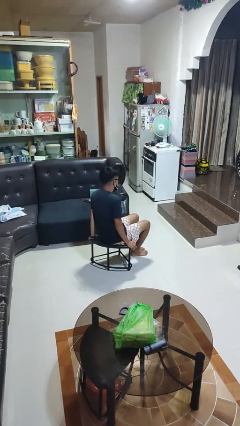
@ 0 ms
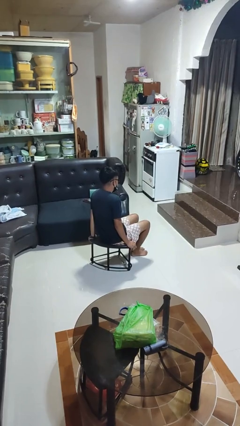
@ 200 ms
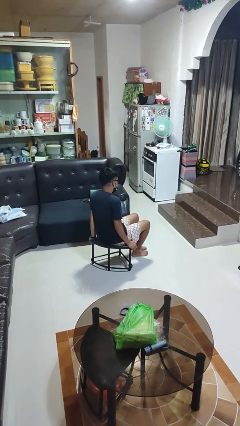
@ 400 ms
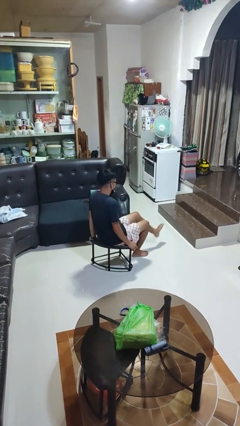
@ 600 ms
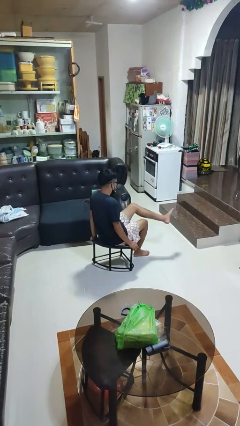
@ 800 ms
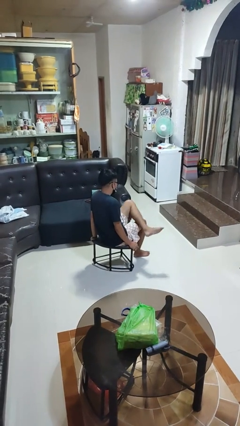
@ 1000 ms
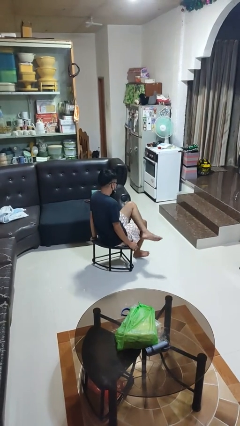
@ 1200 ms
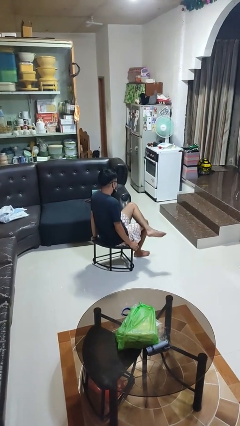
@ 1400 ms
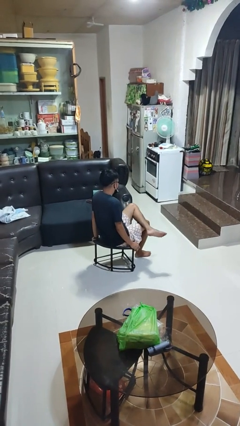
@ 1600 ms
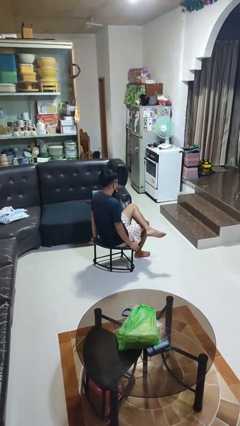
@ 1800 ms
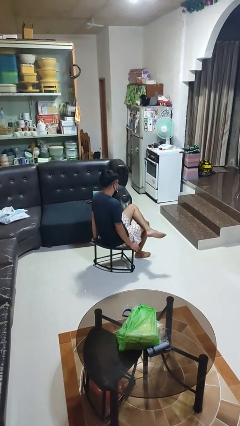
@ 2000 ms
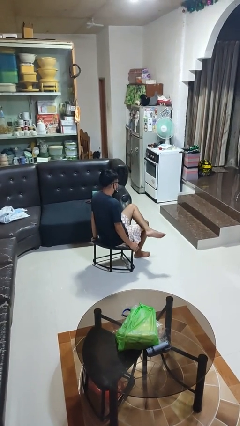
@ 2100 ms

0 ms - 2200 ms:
person crosses legs

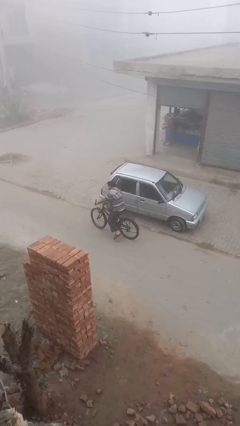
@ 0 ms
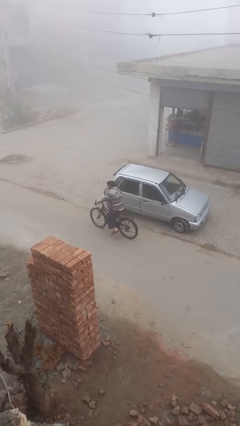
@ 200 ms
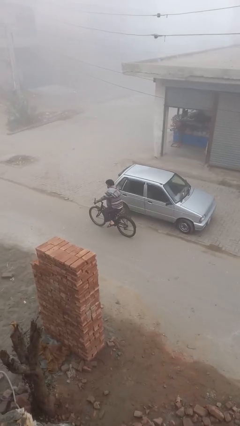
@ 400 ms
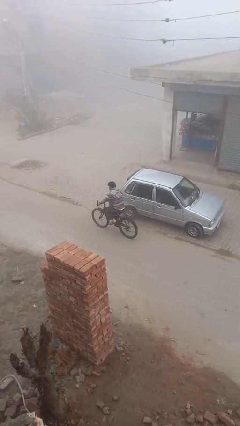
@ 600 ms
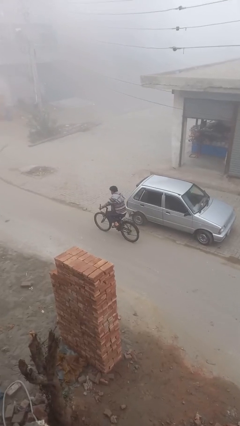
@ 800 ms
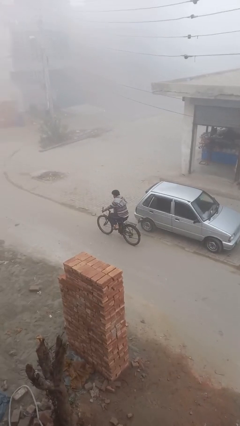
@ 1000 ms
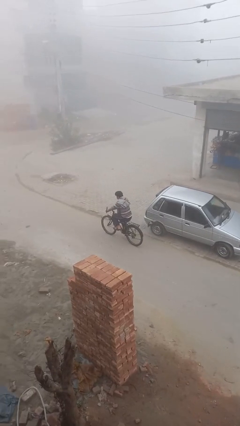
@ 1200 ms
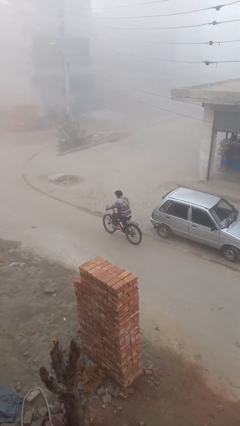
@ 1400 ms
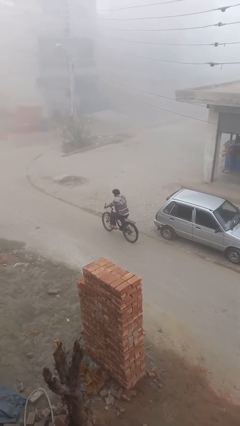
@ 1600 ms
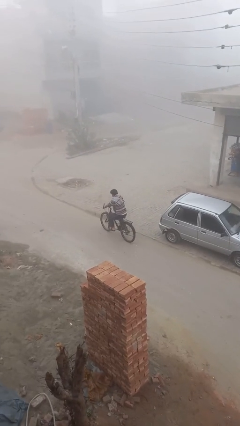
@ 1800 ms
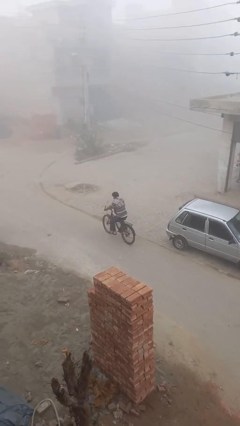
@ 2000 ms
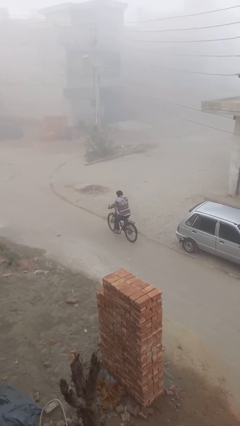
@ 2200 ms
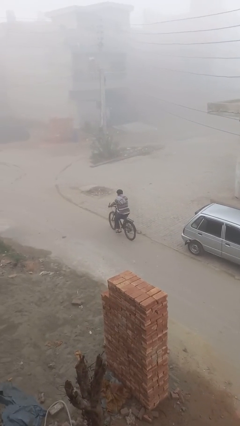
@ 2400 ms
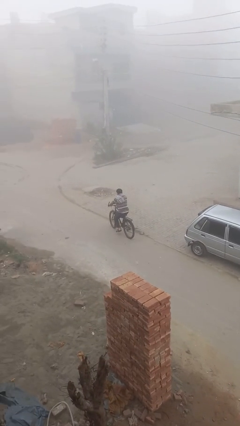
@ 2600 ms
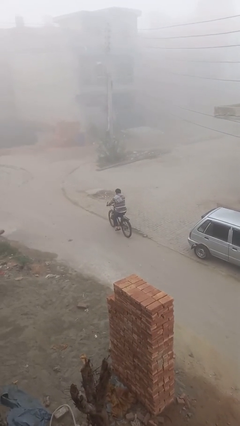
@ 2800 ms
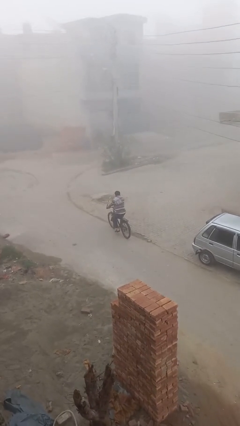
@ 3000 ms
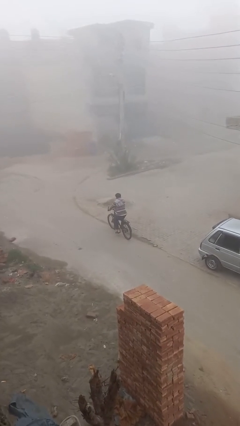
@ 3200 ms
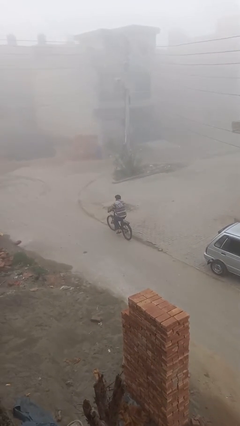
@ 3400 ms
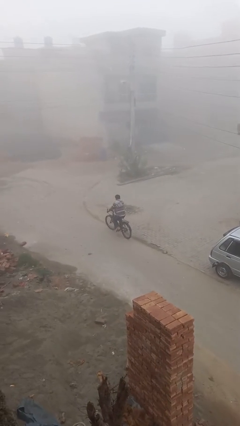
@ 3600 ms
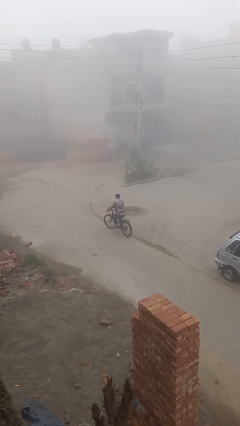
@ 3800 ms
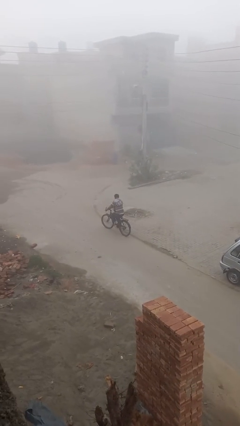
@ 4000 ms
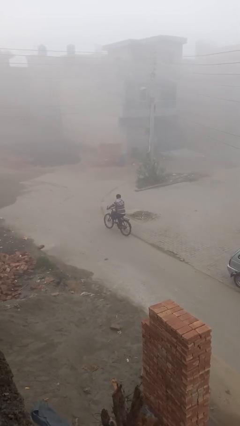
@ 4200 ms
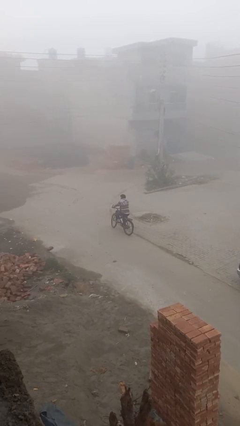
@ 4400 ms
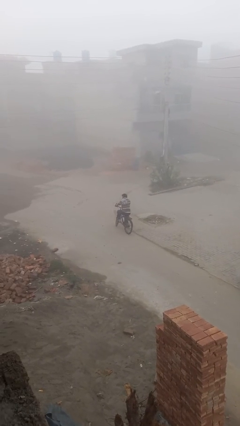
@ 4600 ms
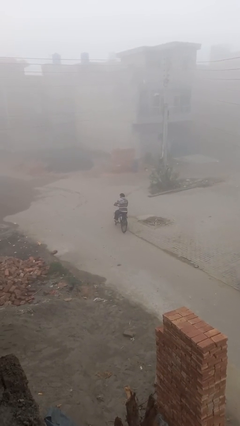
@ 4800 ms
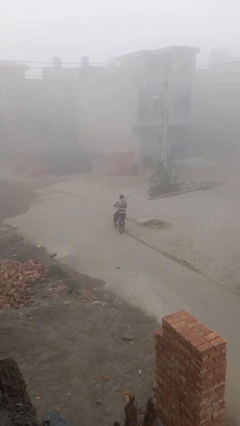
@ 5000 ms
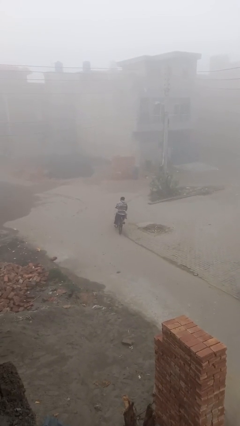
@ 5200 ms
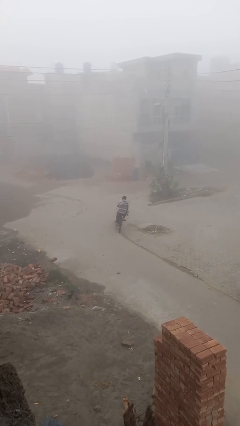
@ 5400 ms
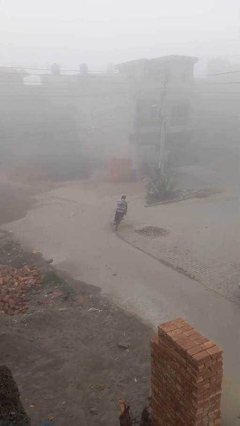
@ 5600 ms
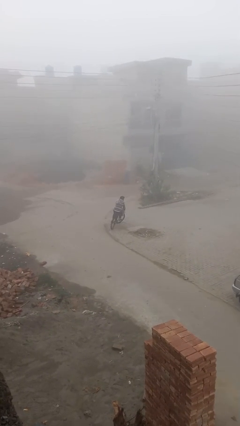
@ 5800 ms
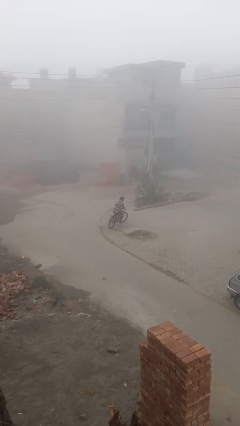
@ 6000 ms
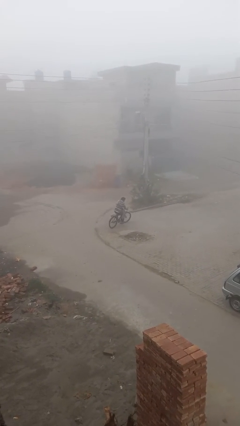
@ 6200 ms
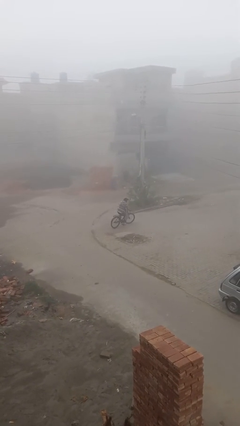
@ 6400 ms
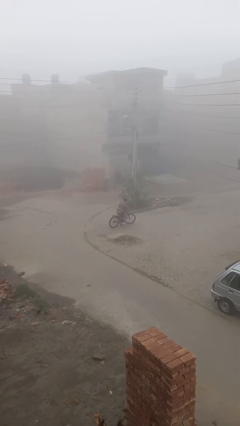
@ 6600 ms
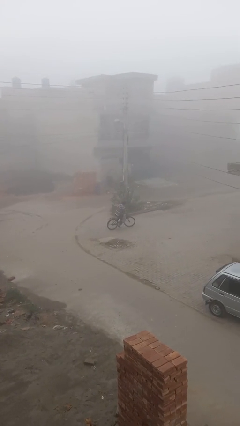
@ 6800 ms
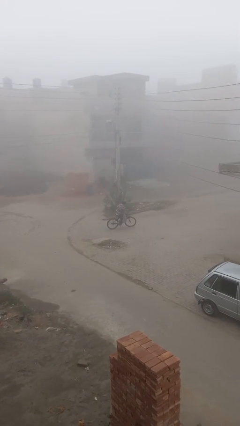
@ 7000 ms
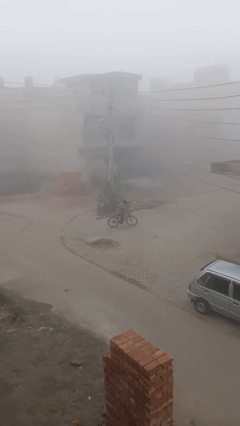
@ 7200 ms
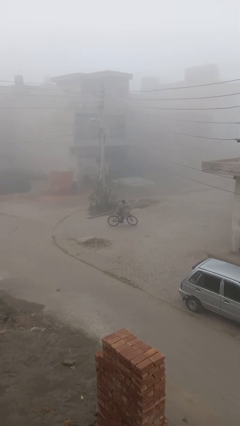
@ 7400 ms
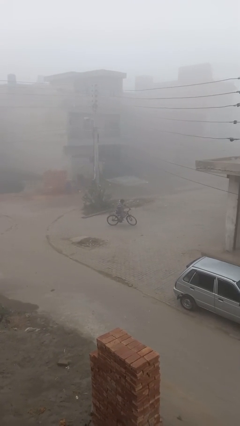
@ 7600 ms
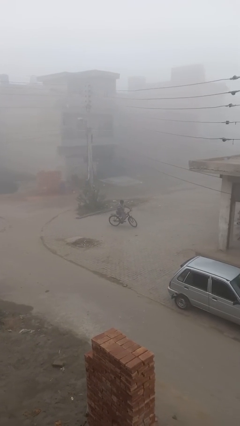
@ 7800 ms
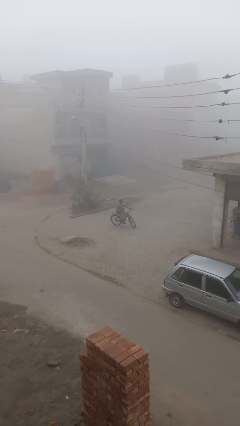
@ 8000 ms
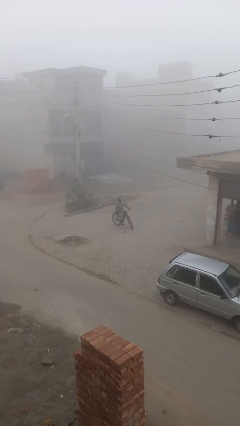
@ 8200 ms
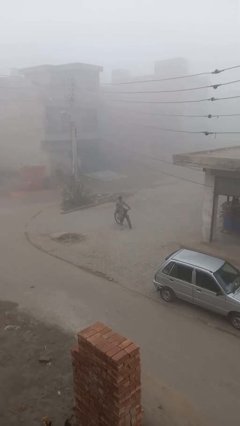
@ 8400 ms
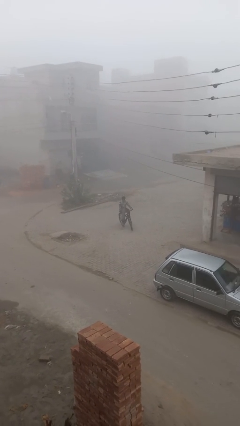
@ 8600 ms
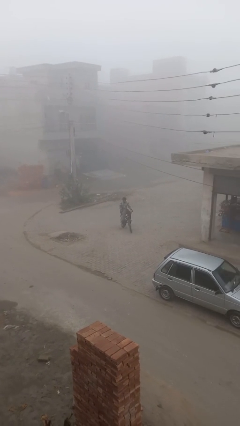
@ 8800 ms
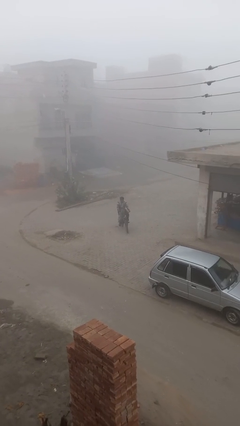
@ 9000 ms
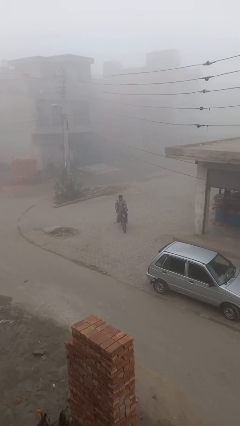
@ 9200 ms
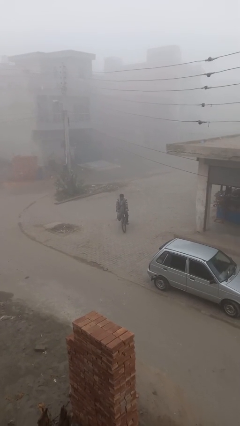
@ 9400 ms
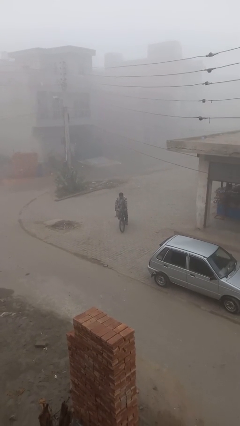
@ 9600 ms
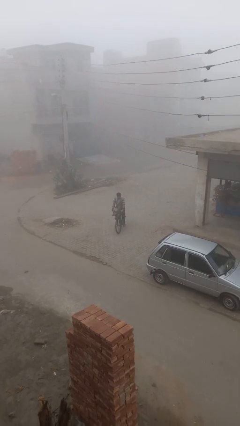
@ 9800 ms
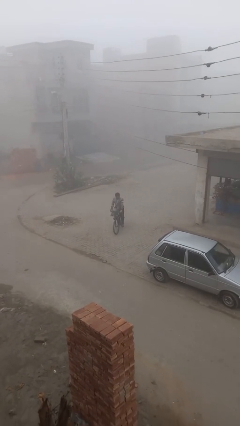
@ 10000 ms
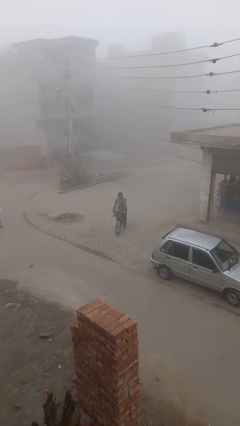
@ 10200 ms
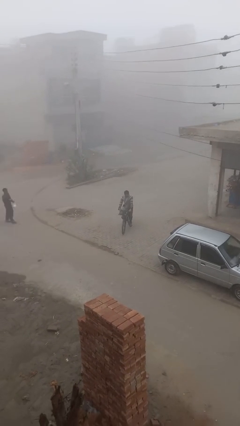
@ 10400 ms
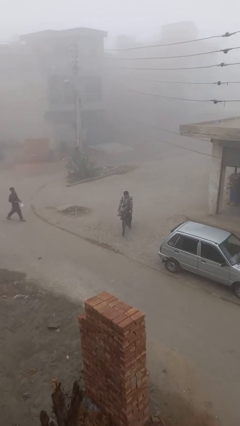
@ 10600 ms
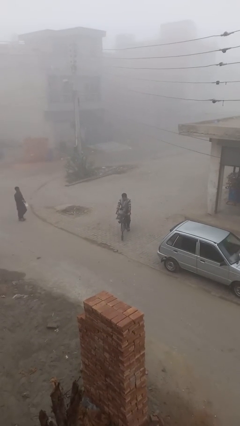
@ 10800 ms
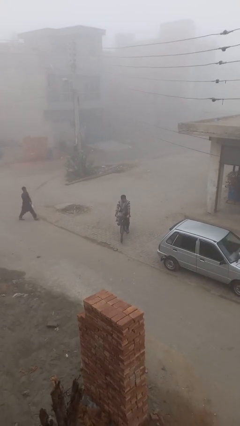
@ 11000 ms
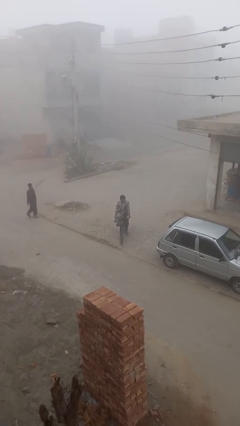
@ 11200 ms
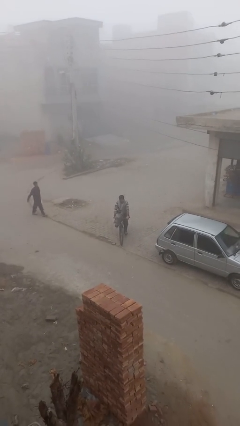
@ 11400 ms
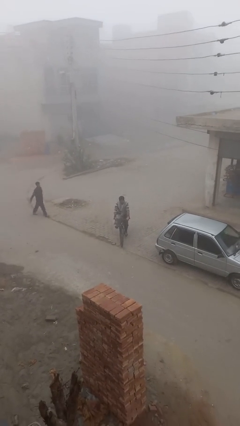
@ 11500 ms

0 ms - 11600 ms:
person rides bicycle

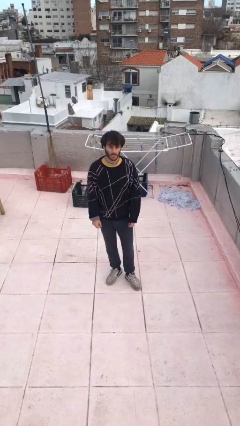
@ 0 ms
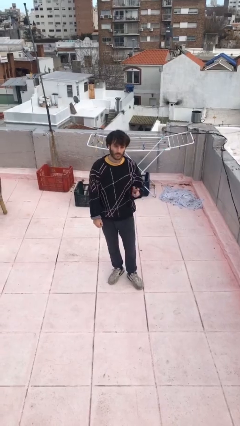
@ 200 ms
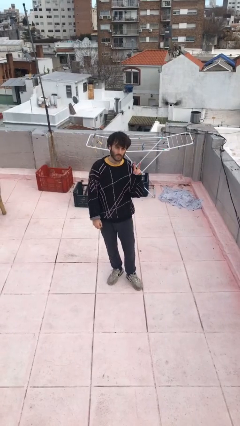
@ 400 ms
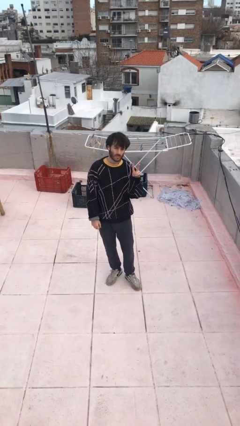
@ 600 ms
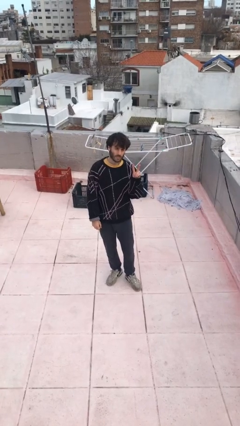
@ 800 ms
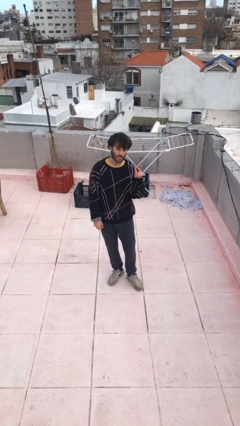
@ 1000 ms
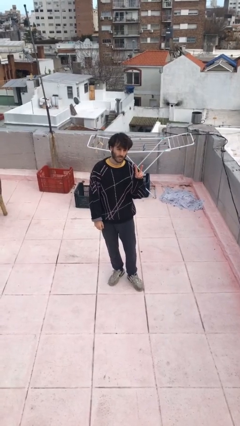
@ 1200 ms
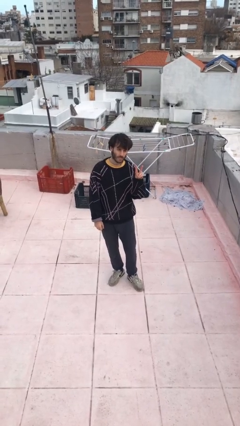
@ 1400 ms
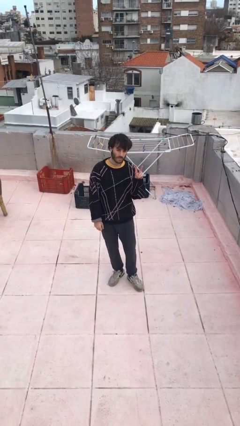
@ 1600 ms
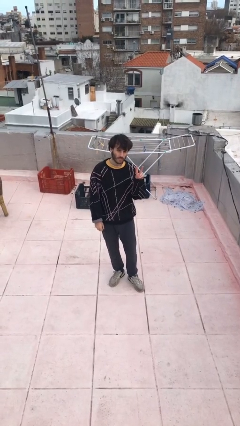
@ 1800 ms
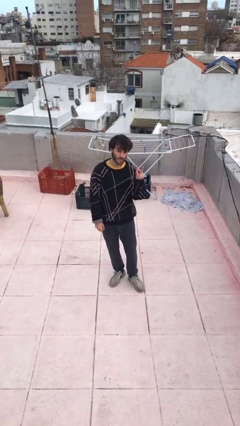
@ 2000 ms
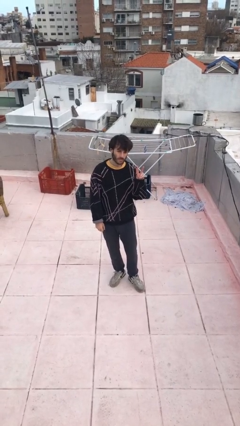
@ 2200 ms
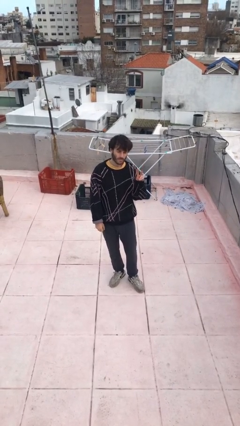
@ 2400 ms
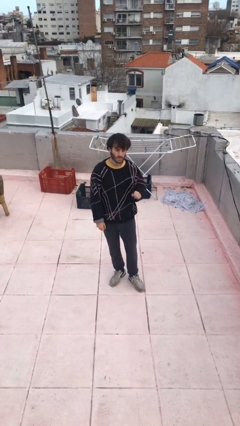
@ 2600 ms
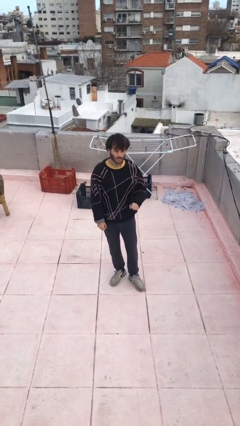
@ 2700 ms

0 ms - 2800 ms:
person gestures peace

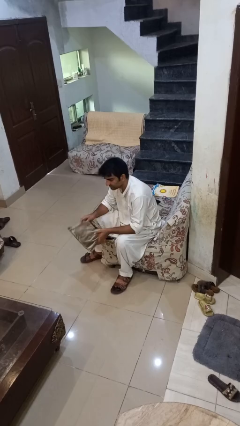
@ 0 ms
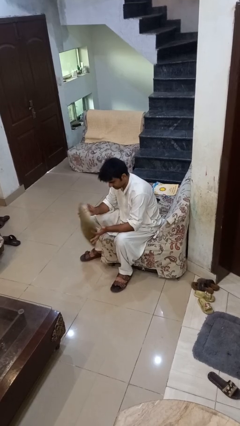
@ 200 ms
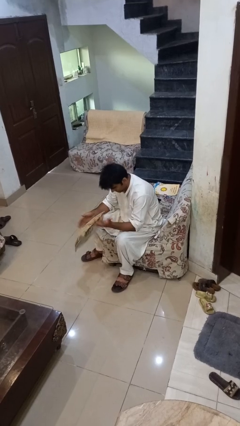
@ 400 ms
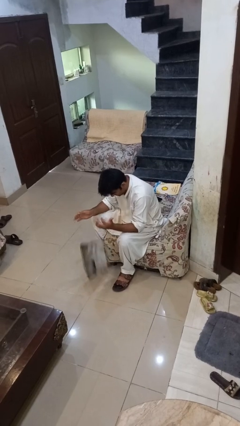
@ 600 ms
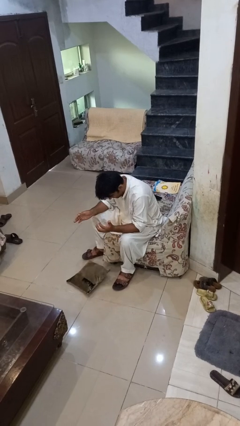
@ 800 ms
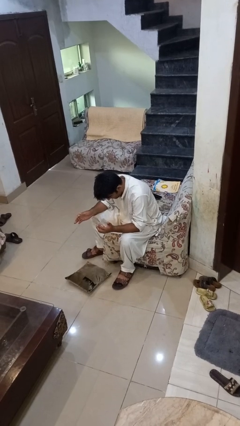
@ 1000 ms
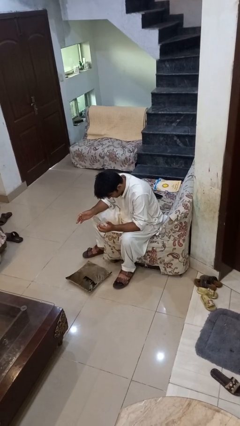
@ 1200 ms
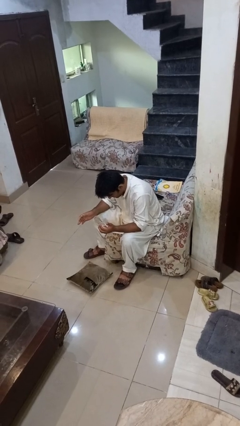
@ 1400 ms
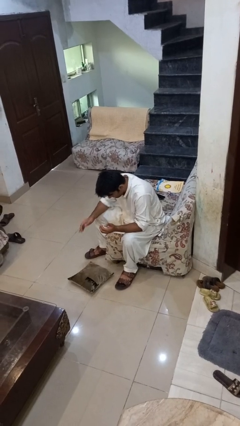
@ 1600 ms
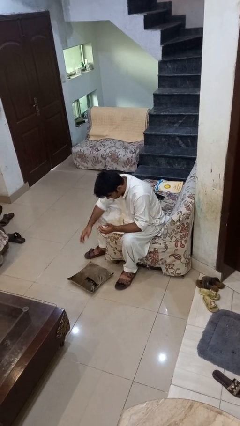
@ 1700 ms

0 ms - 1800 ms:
person drops object
